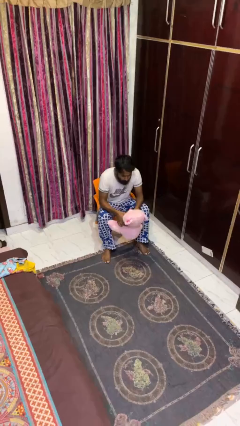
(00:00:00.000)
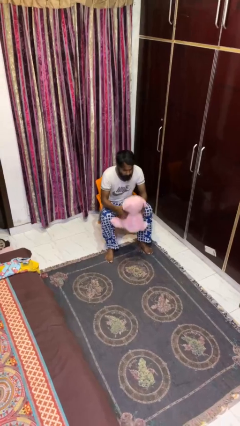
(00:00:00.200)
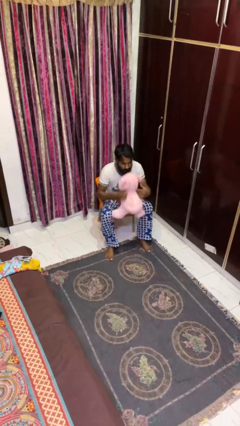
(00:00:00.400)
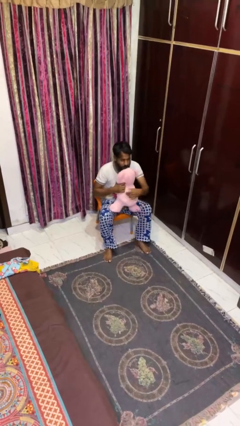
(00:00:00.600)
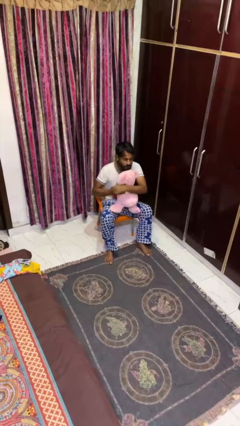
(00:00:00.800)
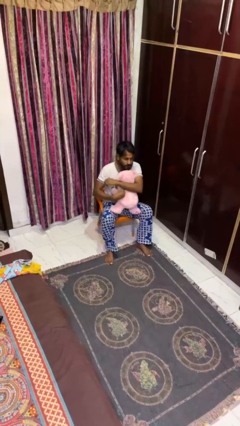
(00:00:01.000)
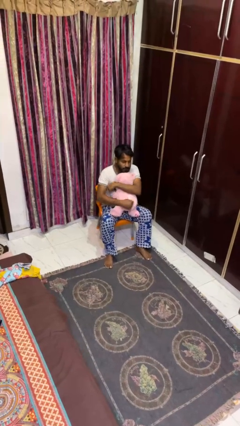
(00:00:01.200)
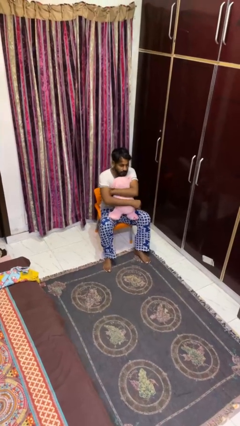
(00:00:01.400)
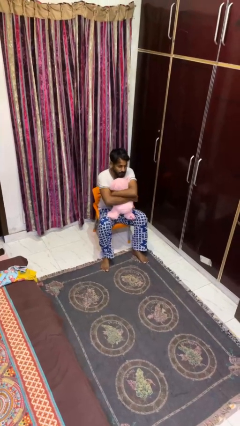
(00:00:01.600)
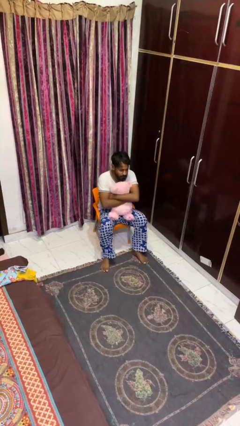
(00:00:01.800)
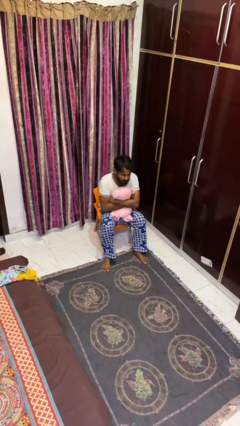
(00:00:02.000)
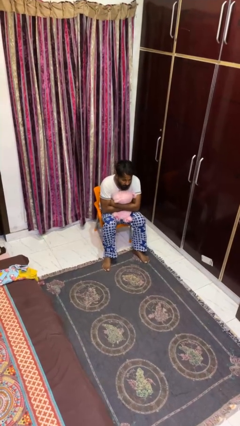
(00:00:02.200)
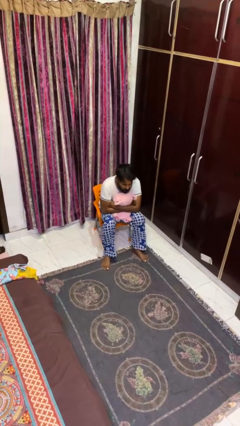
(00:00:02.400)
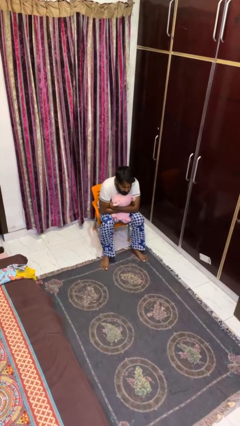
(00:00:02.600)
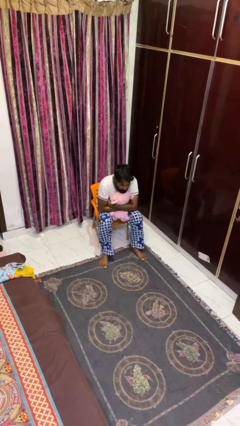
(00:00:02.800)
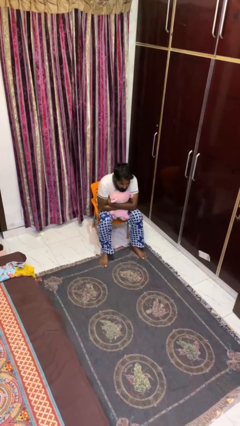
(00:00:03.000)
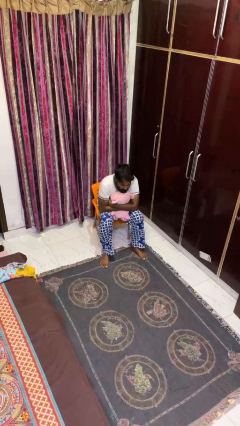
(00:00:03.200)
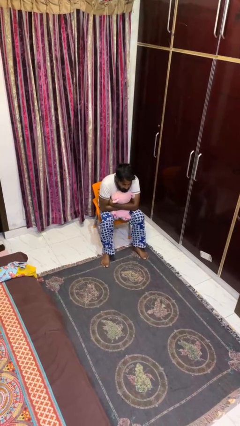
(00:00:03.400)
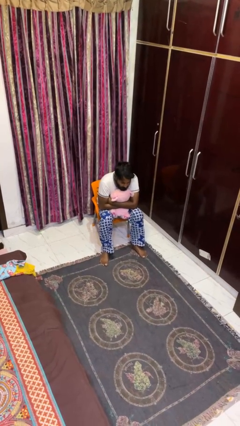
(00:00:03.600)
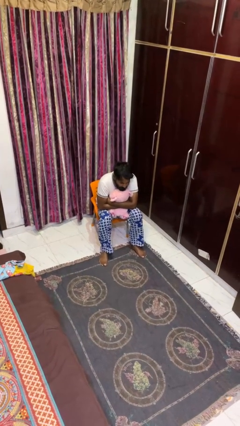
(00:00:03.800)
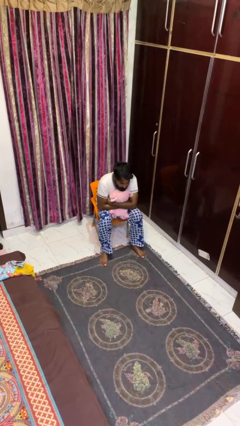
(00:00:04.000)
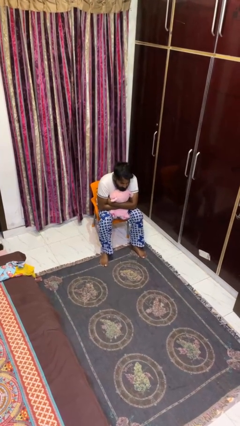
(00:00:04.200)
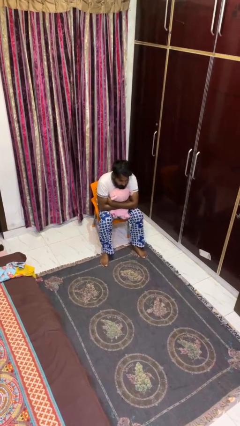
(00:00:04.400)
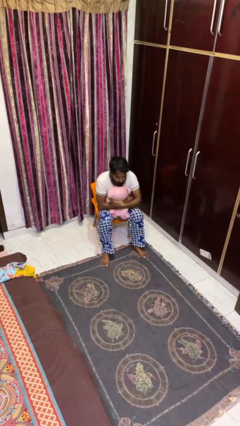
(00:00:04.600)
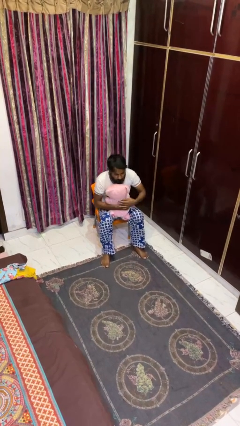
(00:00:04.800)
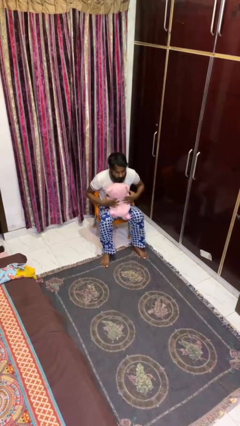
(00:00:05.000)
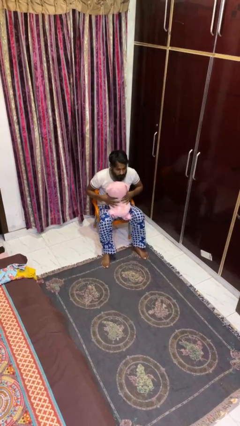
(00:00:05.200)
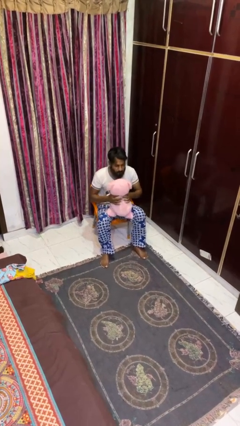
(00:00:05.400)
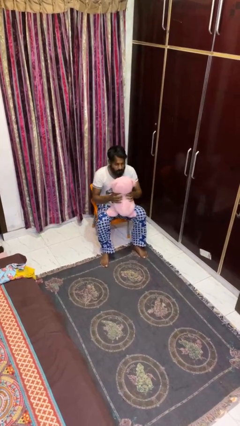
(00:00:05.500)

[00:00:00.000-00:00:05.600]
person hugs stuffed animal

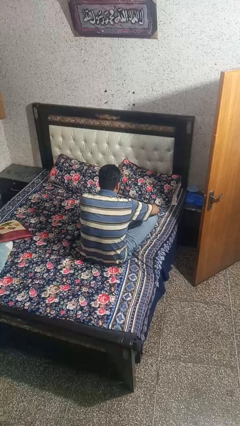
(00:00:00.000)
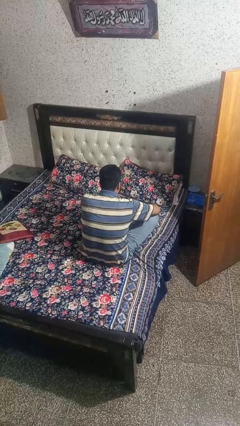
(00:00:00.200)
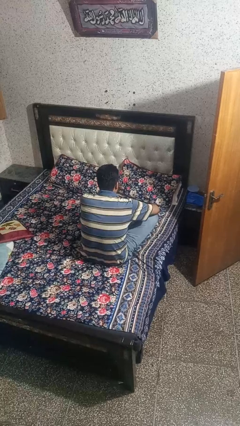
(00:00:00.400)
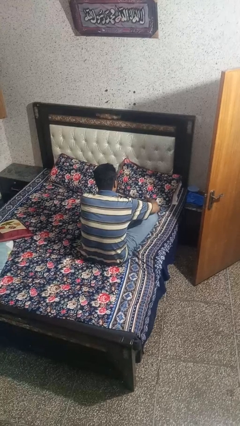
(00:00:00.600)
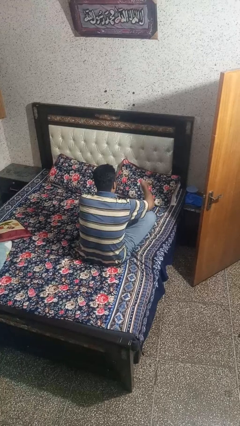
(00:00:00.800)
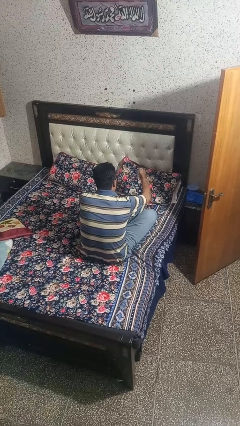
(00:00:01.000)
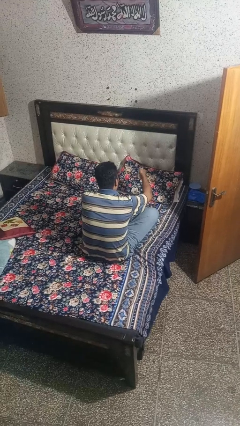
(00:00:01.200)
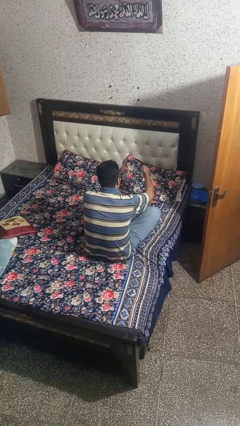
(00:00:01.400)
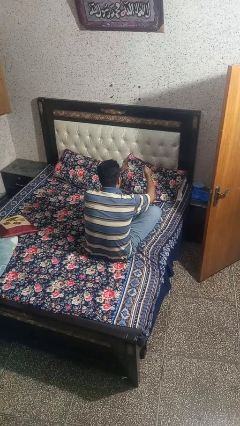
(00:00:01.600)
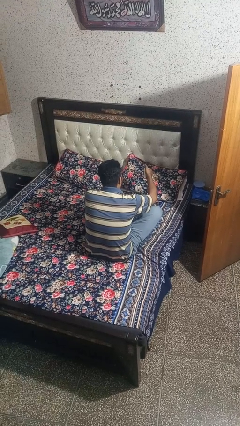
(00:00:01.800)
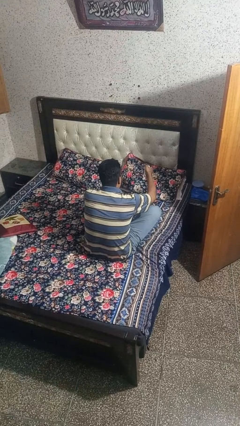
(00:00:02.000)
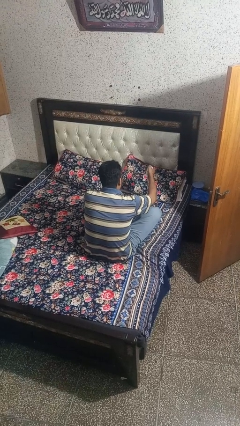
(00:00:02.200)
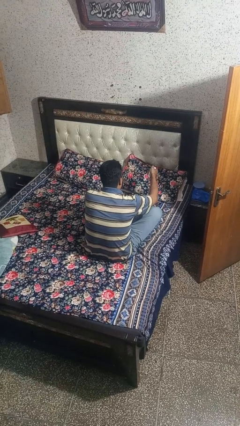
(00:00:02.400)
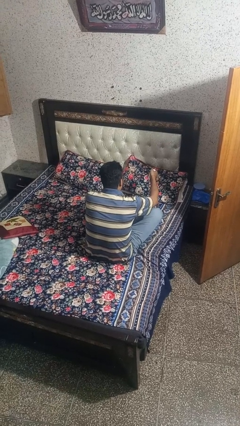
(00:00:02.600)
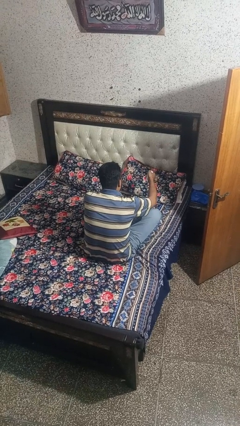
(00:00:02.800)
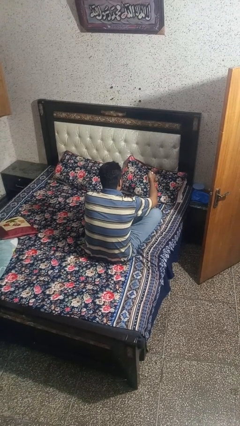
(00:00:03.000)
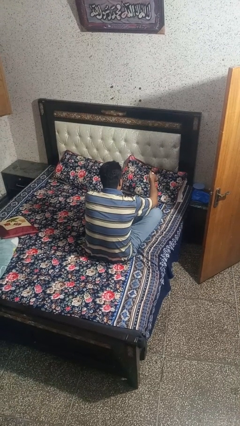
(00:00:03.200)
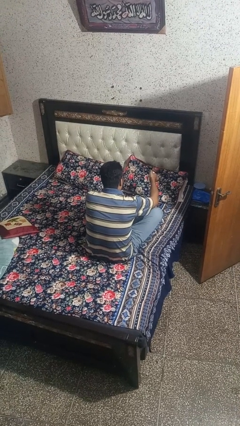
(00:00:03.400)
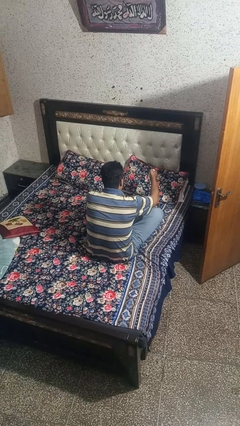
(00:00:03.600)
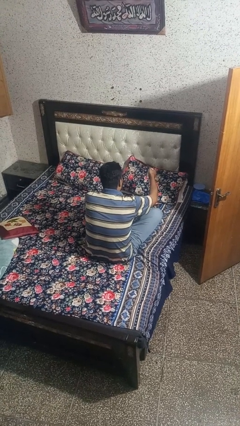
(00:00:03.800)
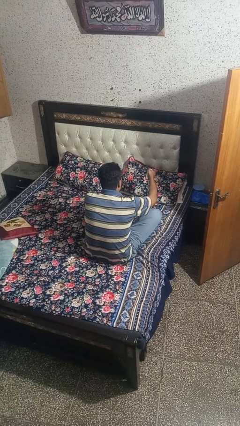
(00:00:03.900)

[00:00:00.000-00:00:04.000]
person uses television remote

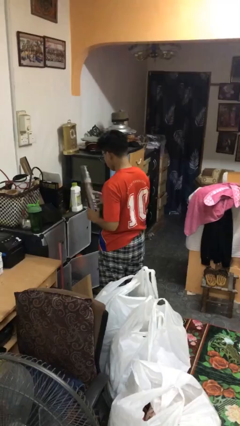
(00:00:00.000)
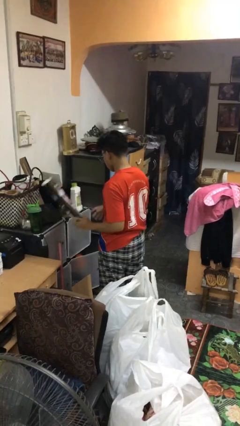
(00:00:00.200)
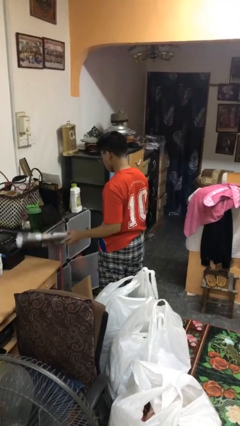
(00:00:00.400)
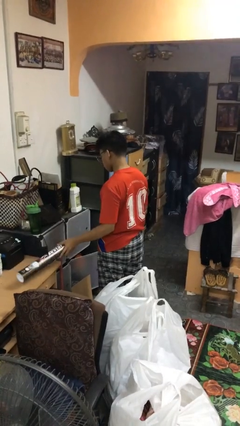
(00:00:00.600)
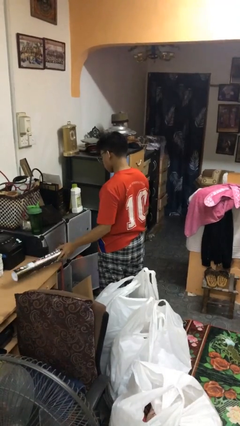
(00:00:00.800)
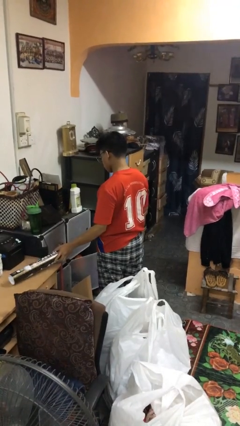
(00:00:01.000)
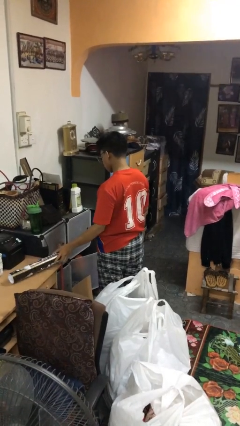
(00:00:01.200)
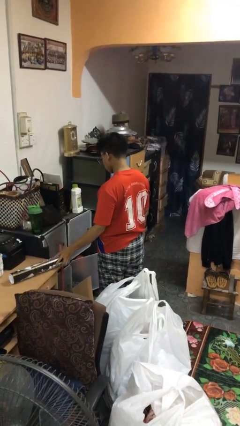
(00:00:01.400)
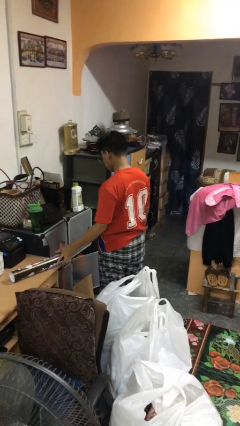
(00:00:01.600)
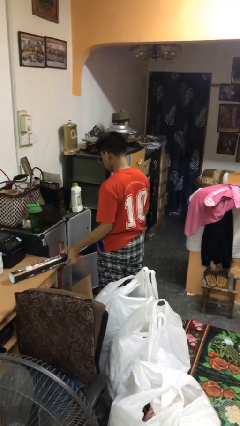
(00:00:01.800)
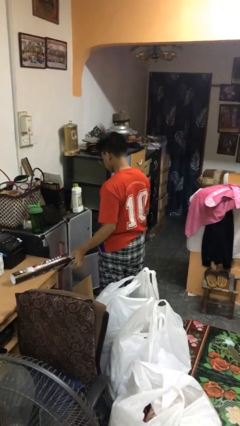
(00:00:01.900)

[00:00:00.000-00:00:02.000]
person puts down object on countertop

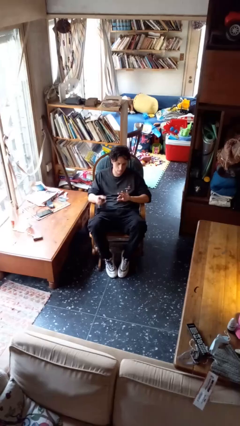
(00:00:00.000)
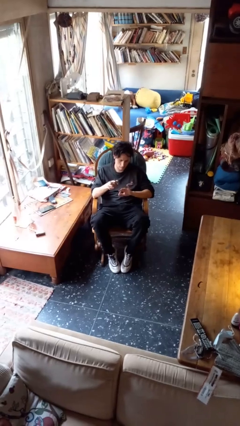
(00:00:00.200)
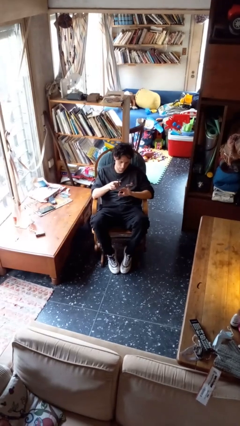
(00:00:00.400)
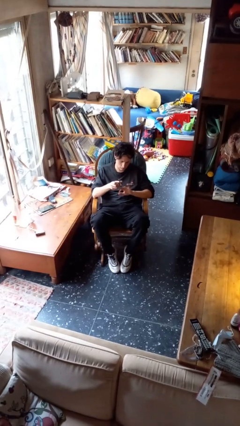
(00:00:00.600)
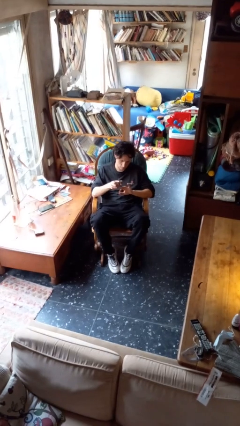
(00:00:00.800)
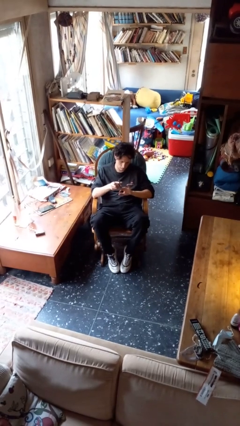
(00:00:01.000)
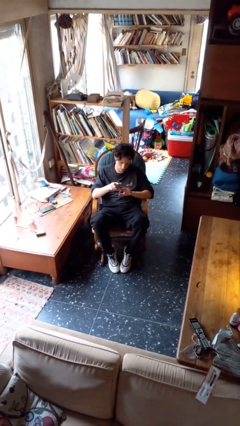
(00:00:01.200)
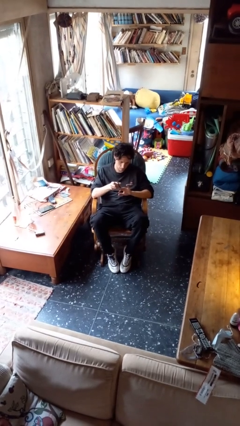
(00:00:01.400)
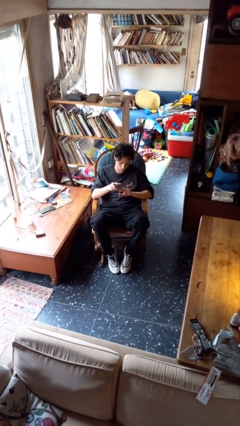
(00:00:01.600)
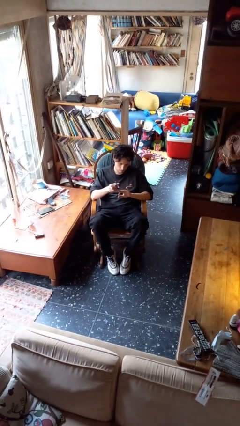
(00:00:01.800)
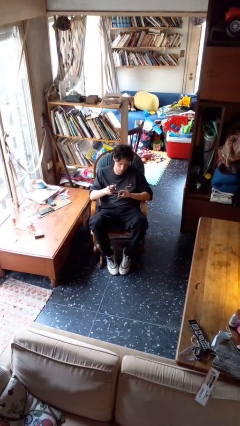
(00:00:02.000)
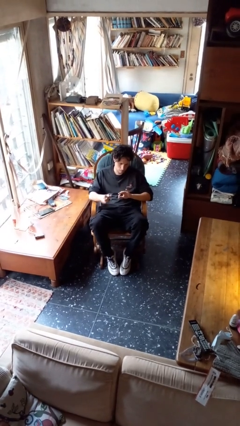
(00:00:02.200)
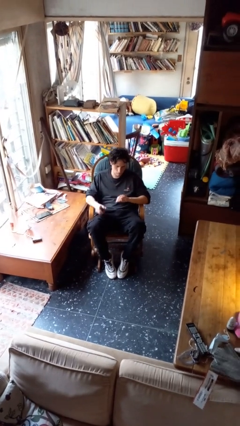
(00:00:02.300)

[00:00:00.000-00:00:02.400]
person clips fingernails

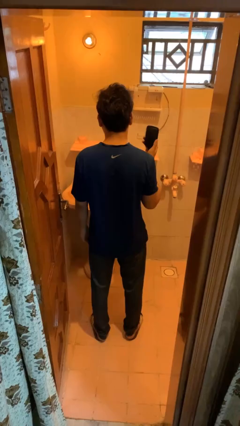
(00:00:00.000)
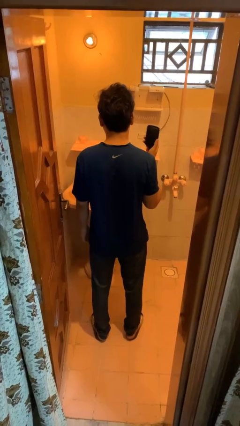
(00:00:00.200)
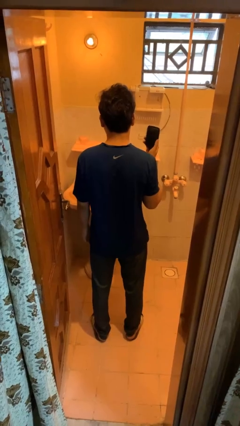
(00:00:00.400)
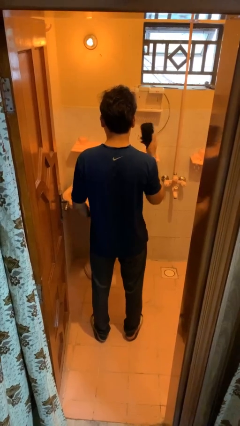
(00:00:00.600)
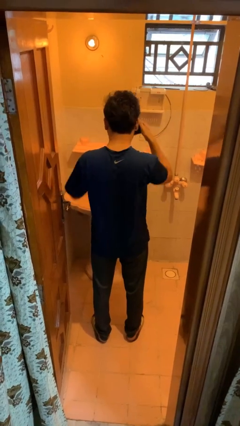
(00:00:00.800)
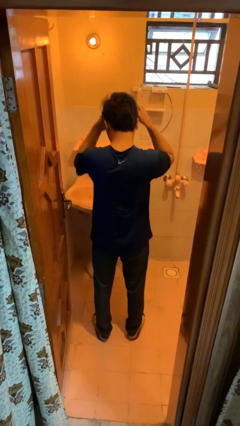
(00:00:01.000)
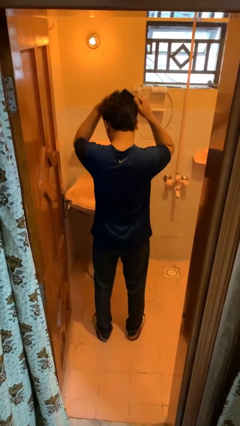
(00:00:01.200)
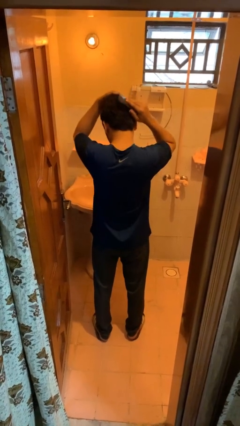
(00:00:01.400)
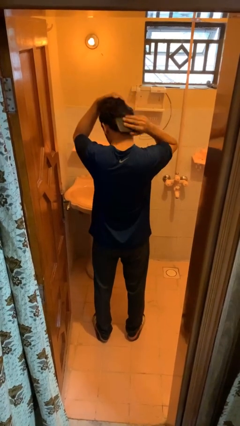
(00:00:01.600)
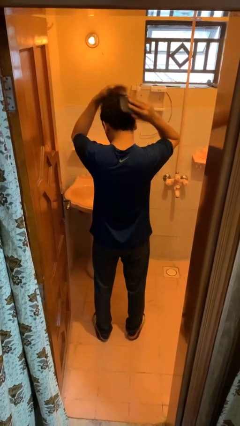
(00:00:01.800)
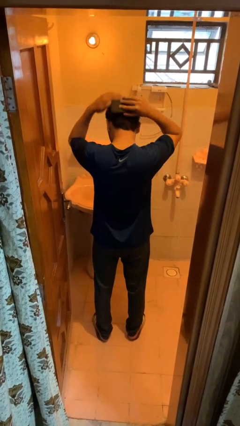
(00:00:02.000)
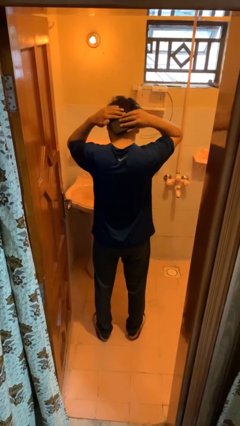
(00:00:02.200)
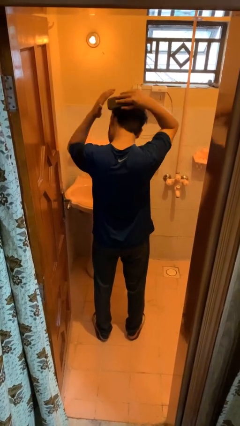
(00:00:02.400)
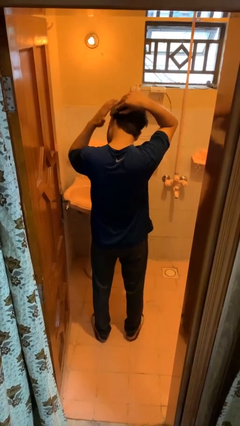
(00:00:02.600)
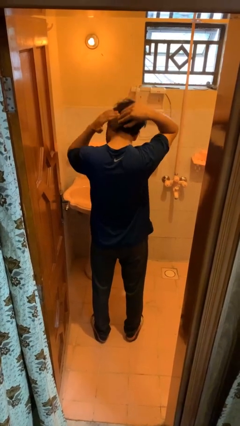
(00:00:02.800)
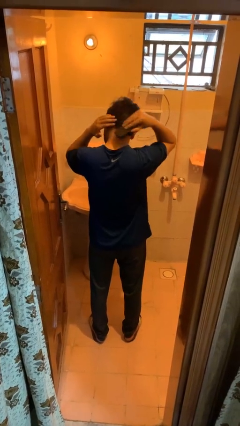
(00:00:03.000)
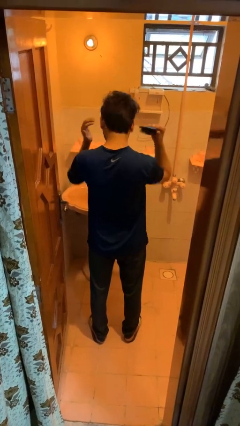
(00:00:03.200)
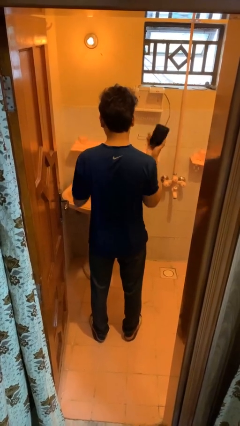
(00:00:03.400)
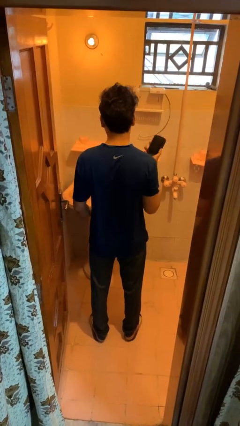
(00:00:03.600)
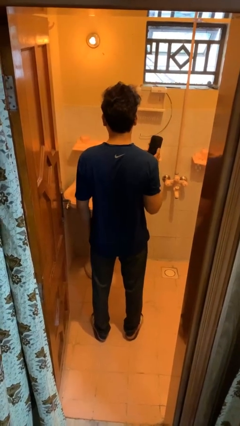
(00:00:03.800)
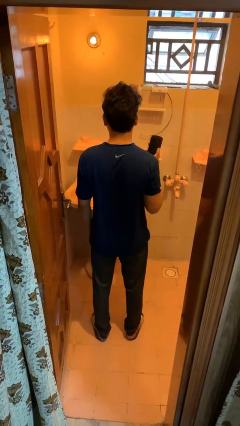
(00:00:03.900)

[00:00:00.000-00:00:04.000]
person brushes hair
